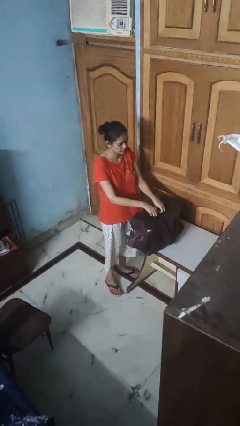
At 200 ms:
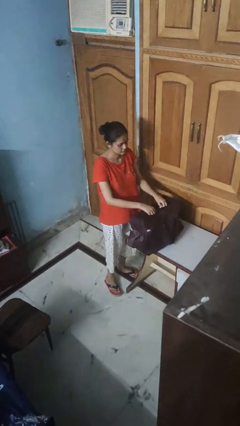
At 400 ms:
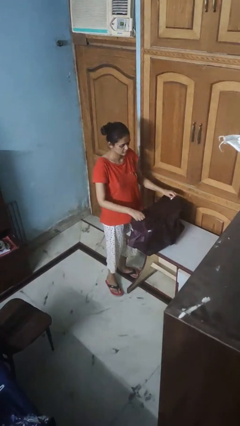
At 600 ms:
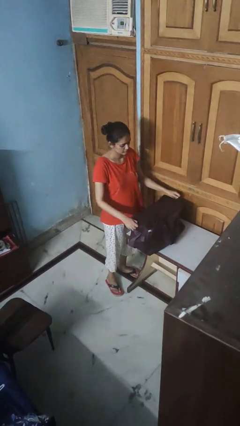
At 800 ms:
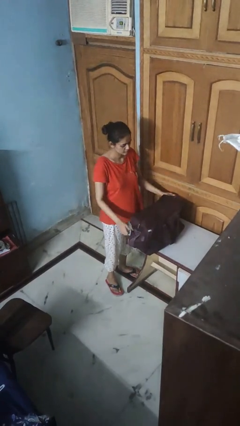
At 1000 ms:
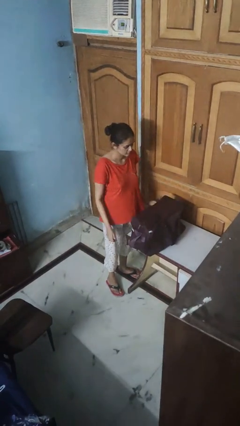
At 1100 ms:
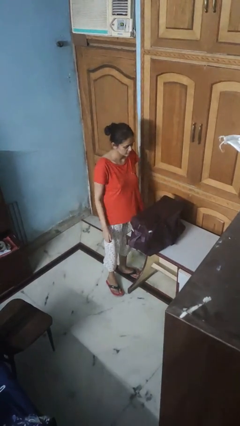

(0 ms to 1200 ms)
person opens suitcase

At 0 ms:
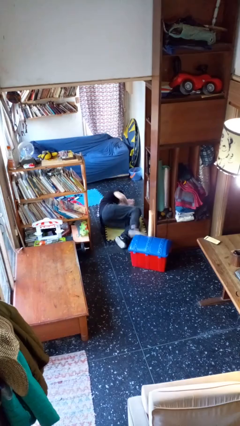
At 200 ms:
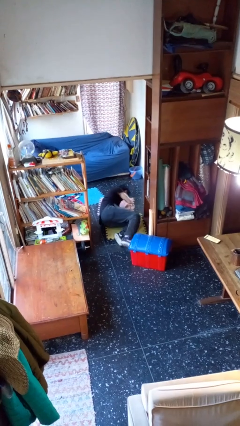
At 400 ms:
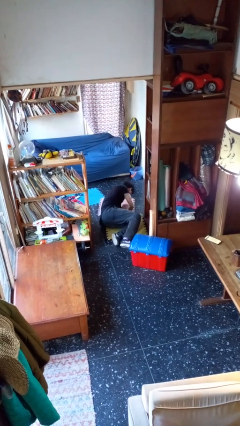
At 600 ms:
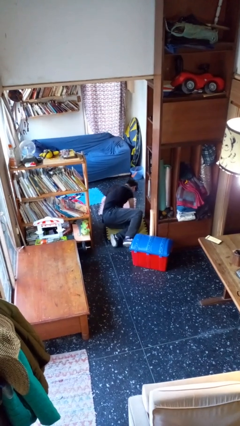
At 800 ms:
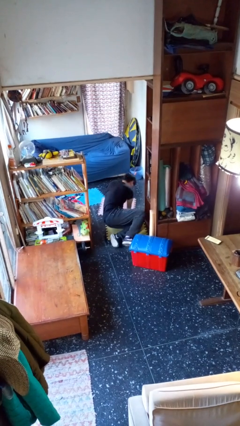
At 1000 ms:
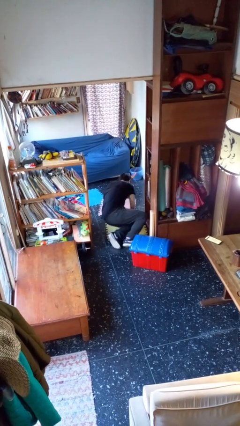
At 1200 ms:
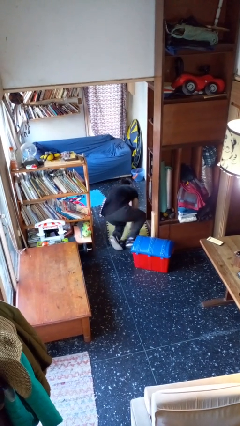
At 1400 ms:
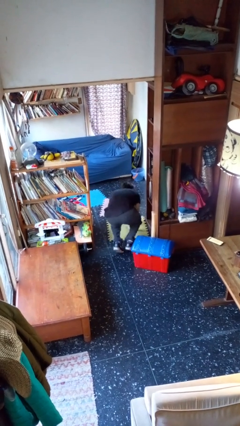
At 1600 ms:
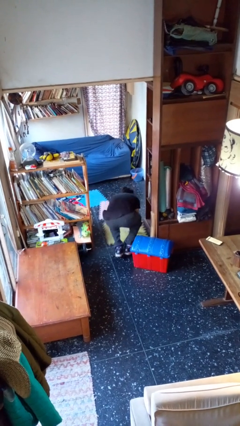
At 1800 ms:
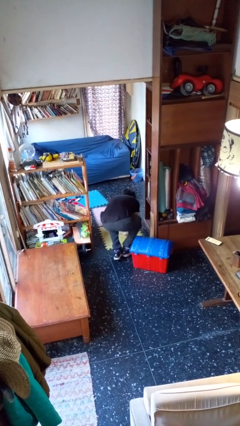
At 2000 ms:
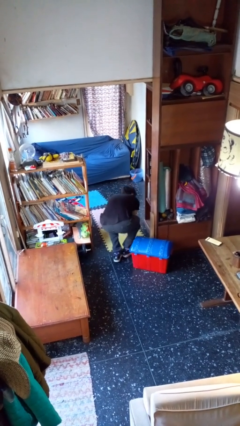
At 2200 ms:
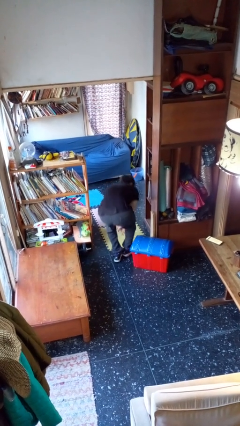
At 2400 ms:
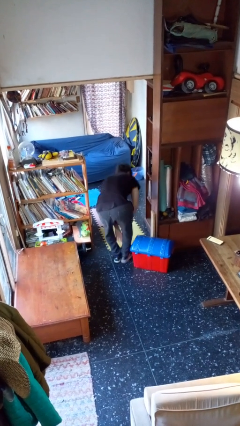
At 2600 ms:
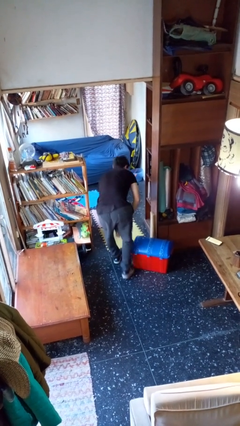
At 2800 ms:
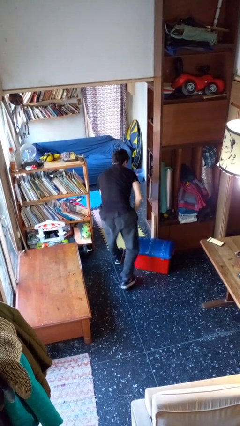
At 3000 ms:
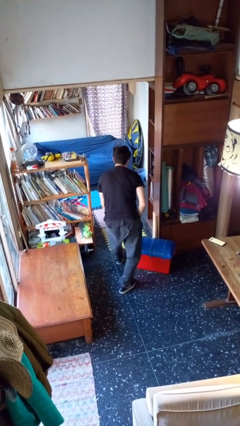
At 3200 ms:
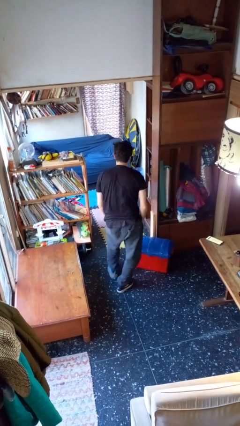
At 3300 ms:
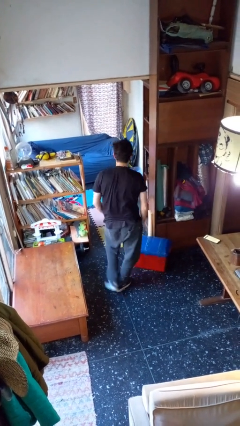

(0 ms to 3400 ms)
person stands up from floor

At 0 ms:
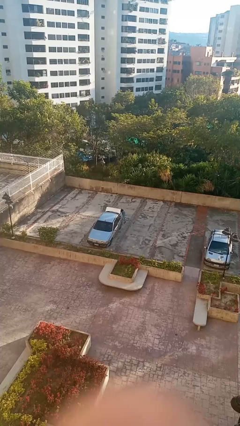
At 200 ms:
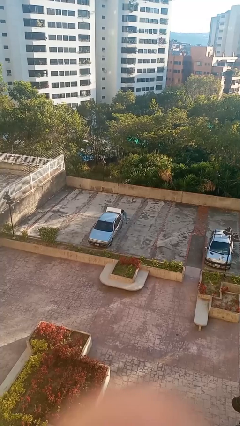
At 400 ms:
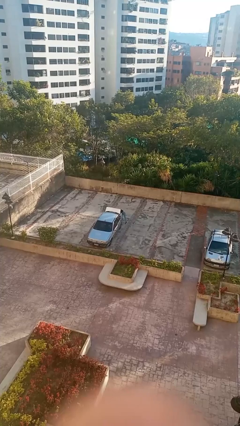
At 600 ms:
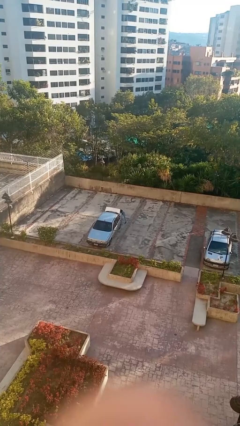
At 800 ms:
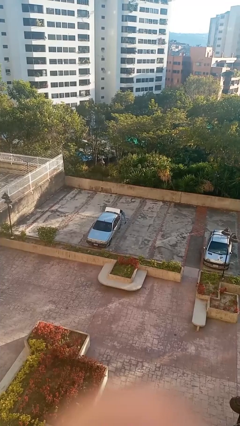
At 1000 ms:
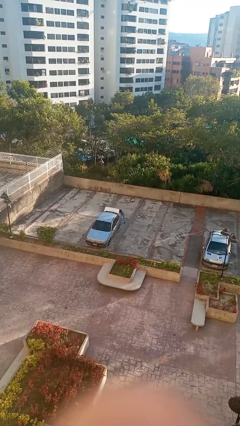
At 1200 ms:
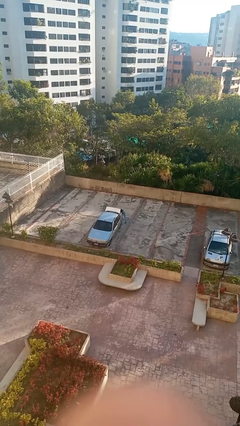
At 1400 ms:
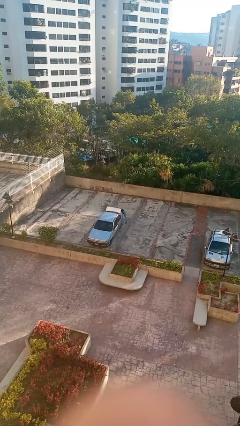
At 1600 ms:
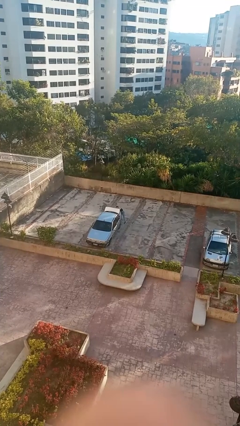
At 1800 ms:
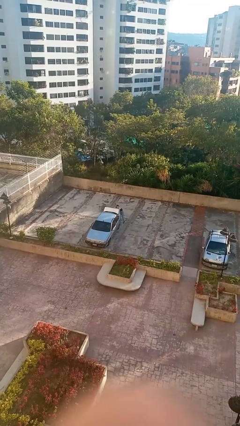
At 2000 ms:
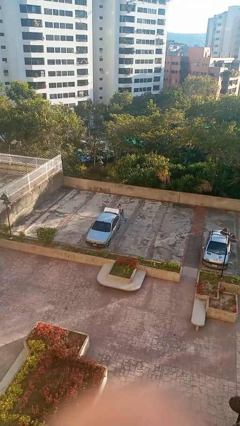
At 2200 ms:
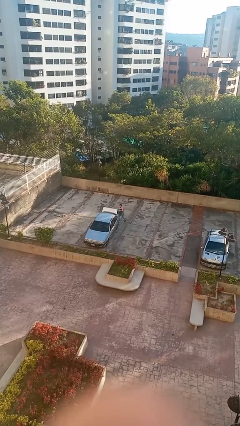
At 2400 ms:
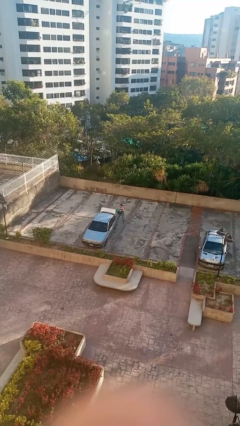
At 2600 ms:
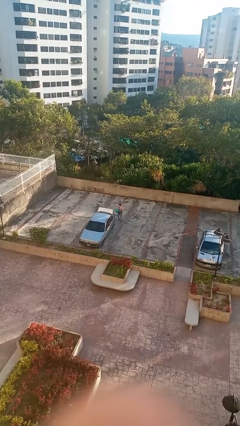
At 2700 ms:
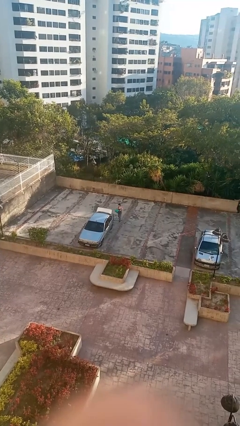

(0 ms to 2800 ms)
person unloads car

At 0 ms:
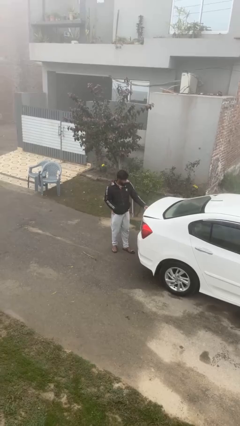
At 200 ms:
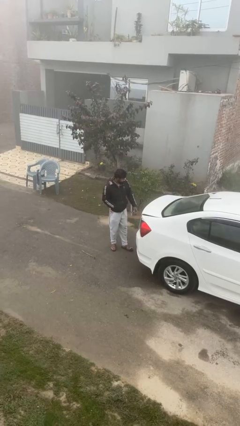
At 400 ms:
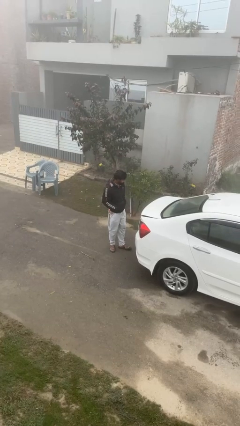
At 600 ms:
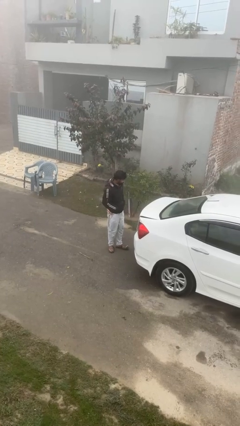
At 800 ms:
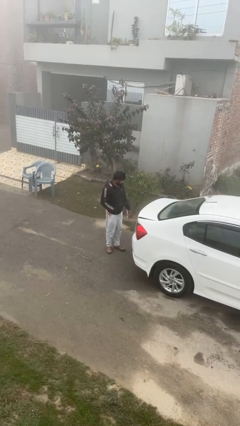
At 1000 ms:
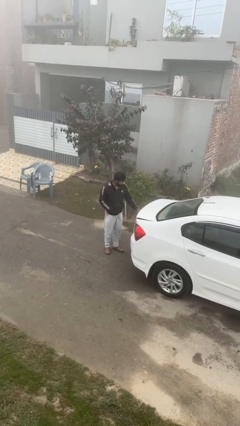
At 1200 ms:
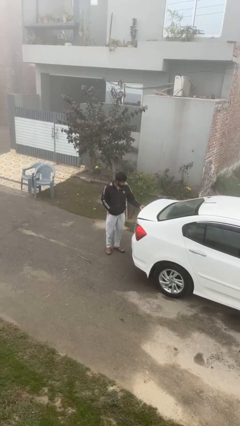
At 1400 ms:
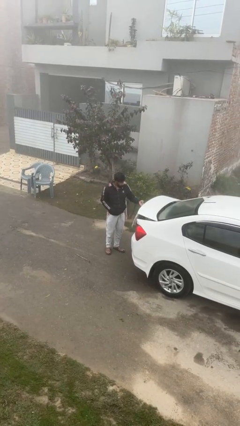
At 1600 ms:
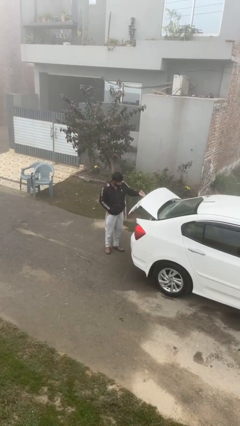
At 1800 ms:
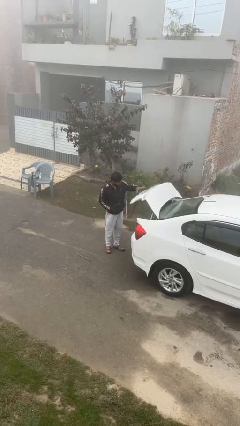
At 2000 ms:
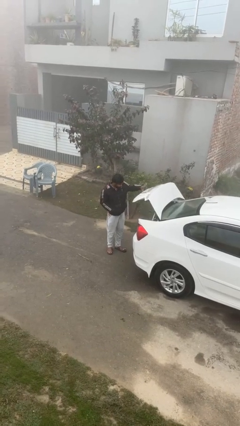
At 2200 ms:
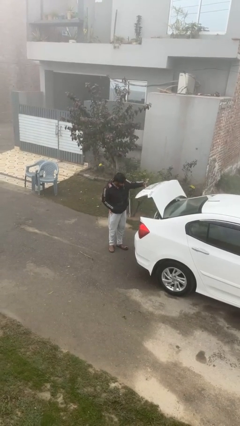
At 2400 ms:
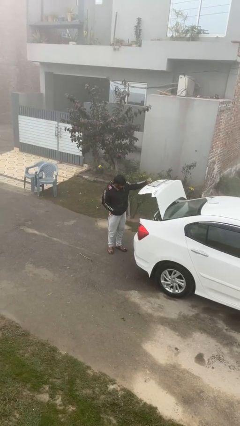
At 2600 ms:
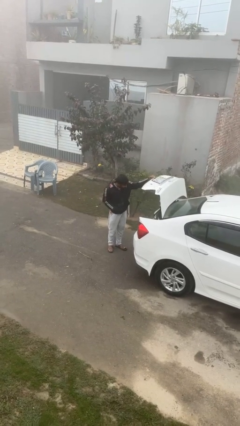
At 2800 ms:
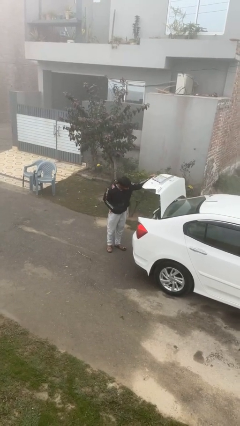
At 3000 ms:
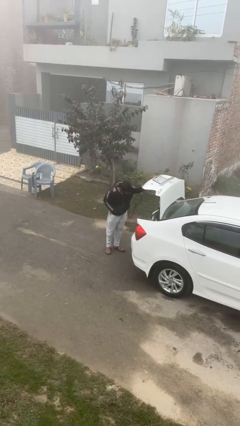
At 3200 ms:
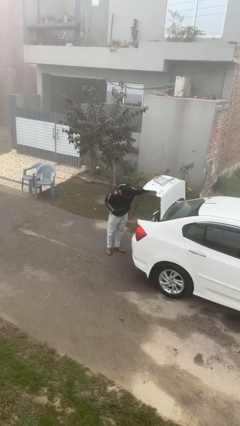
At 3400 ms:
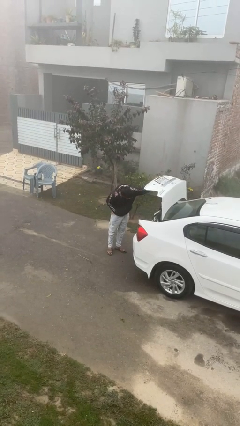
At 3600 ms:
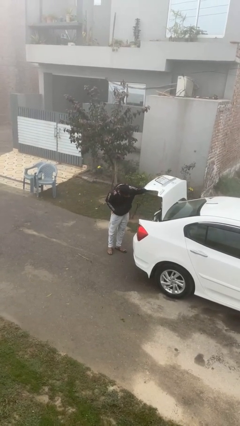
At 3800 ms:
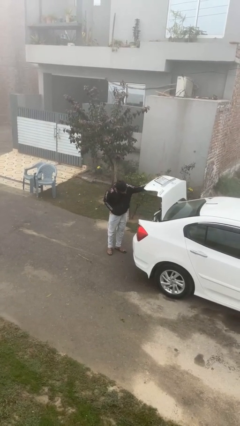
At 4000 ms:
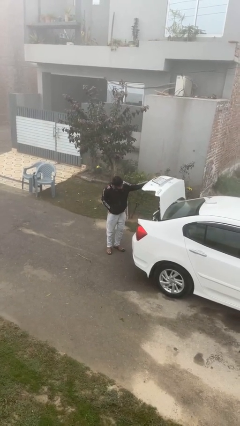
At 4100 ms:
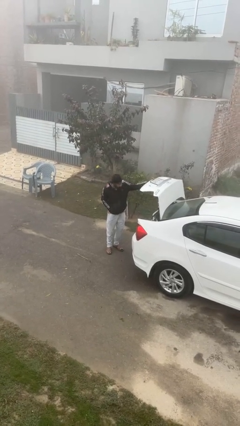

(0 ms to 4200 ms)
person opens car trunk

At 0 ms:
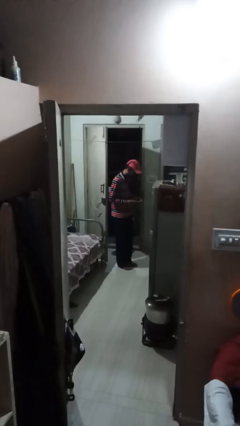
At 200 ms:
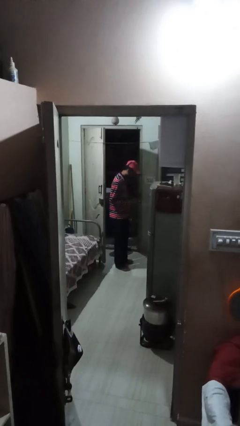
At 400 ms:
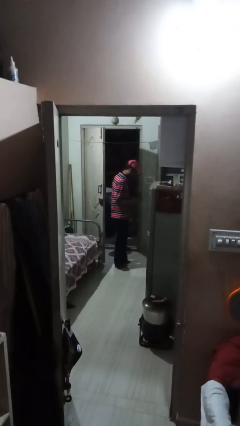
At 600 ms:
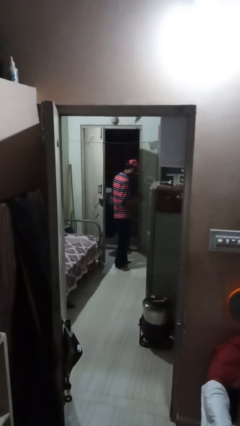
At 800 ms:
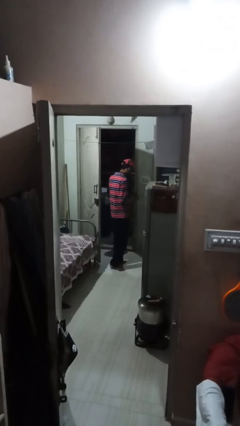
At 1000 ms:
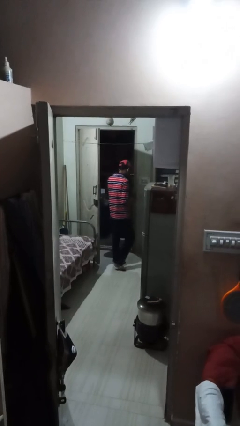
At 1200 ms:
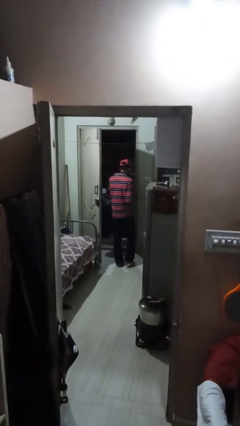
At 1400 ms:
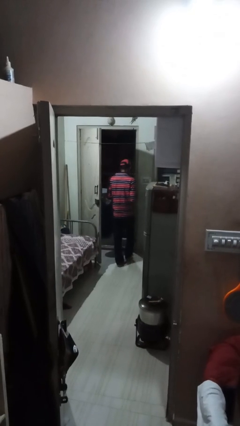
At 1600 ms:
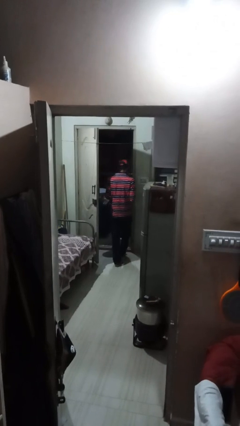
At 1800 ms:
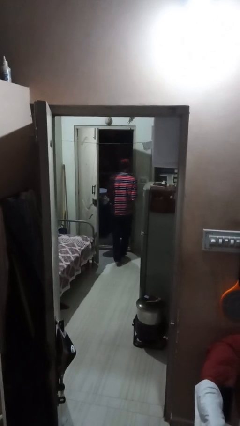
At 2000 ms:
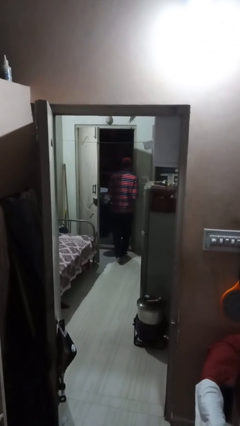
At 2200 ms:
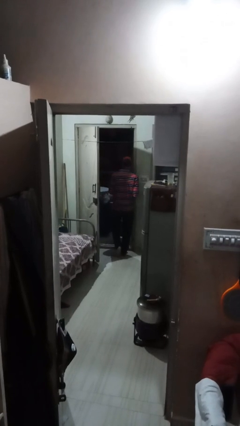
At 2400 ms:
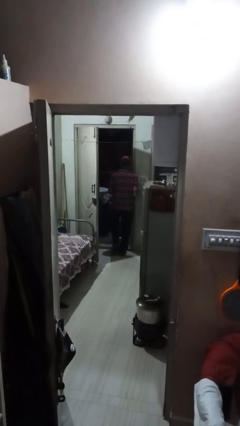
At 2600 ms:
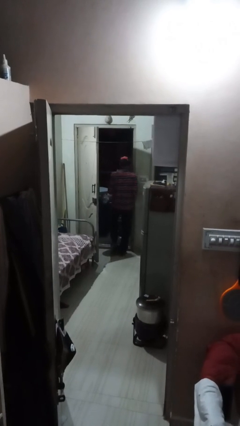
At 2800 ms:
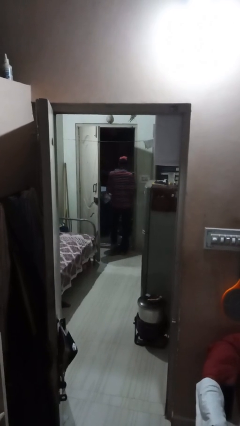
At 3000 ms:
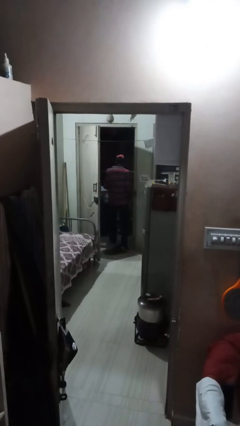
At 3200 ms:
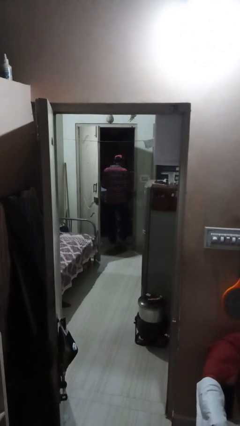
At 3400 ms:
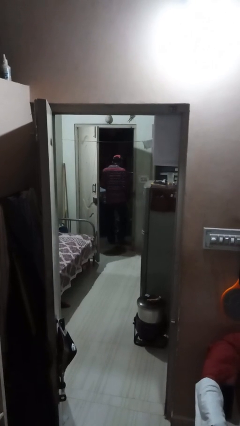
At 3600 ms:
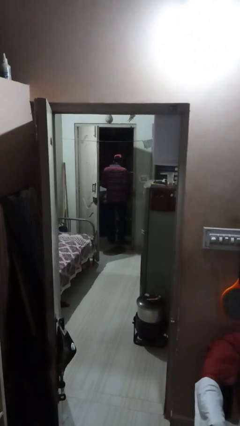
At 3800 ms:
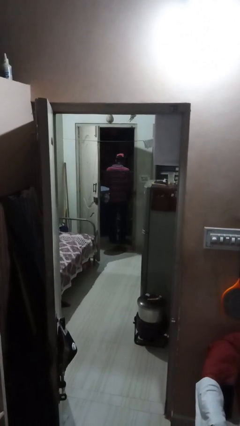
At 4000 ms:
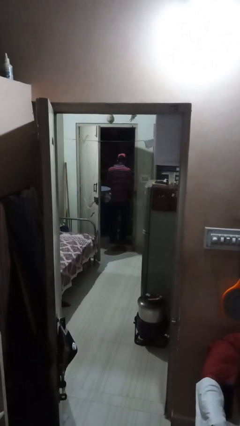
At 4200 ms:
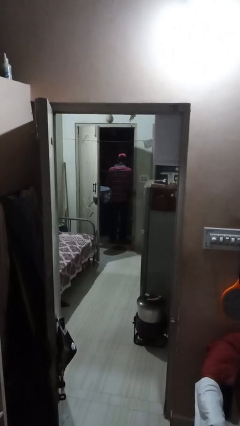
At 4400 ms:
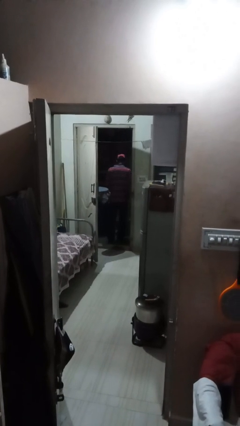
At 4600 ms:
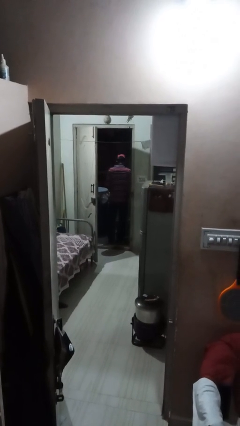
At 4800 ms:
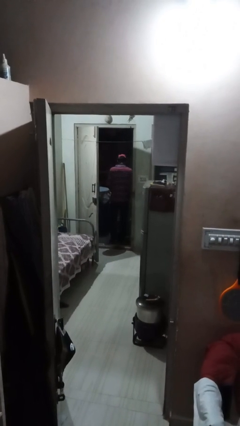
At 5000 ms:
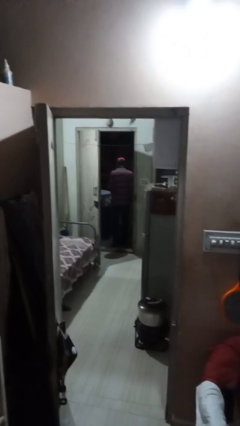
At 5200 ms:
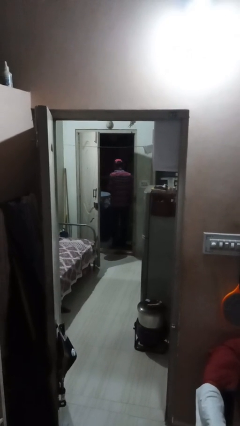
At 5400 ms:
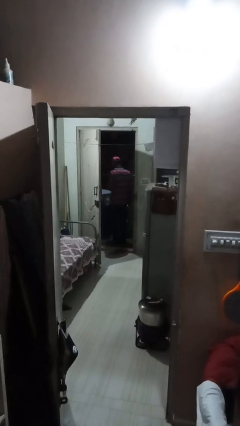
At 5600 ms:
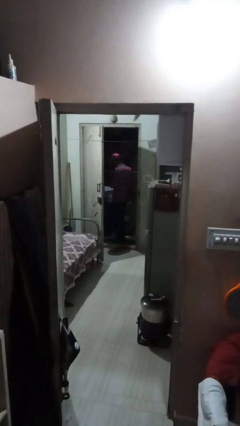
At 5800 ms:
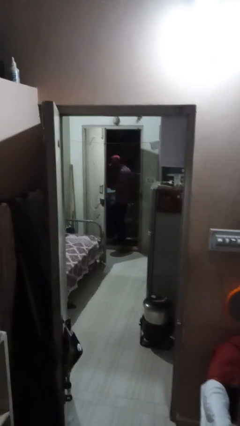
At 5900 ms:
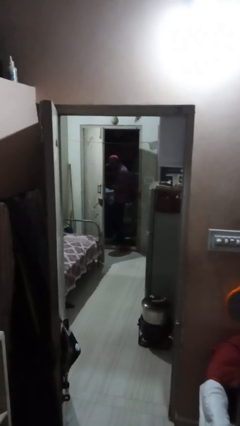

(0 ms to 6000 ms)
person exits scene through structure
